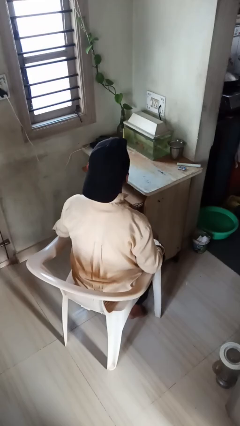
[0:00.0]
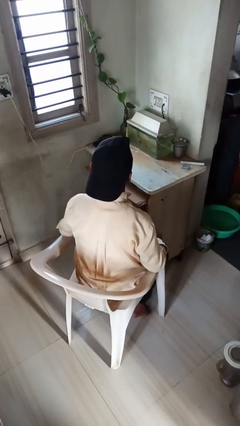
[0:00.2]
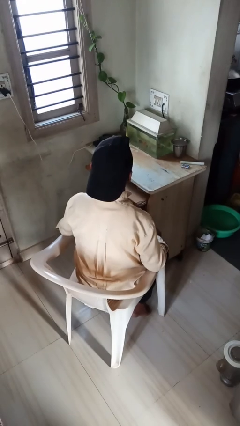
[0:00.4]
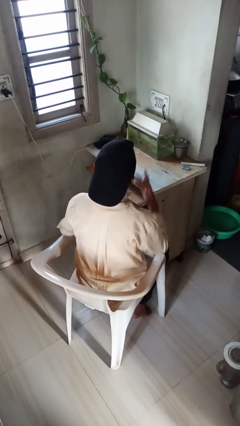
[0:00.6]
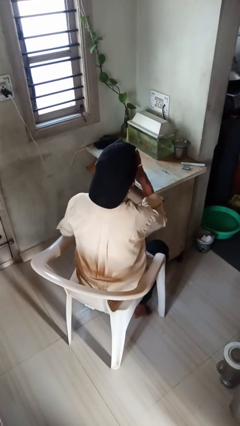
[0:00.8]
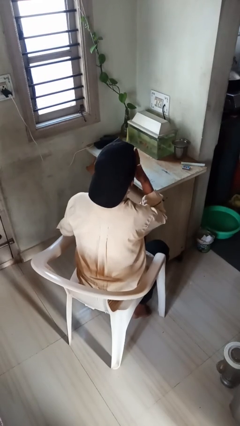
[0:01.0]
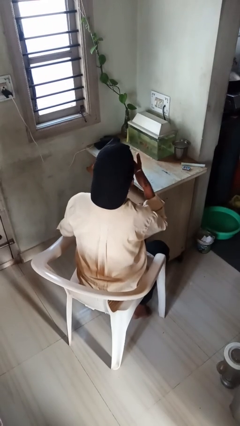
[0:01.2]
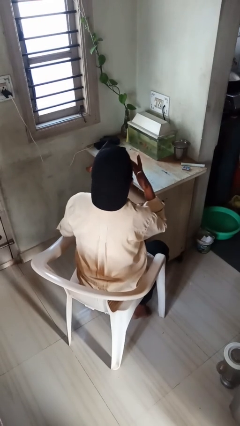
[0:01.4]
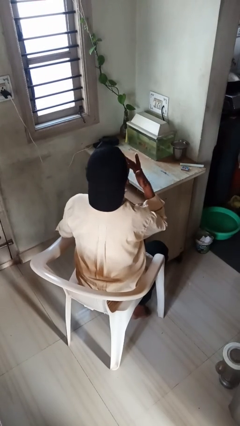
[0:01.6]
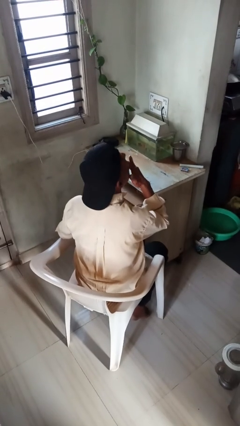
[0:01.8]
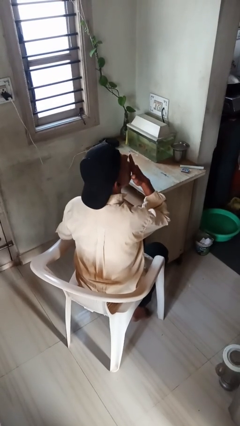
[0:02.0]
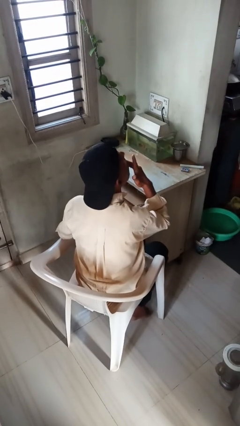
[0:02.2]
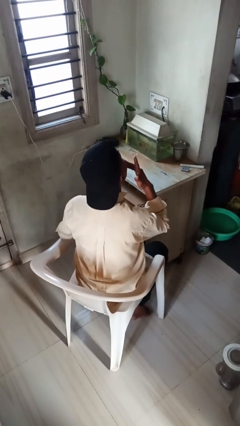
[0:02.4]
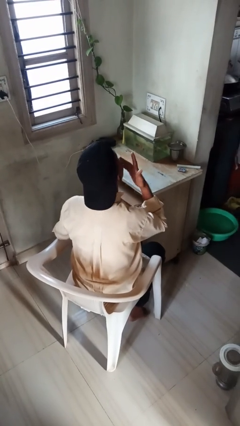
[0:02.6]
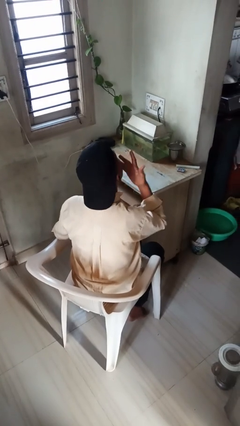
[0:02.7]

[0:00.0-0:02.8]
person licks fingers

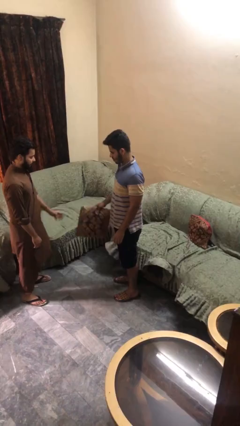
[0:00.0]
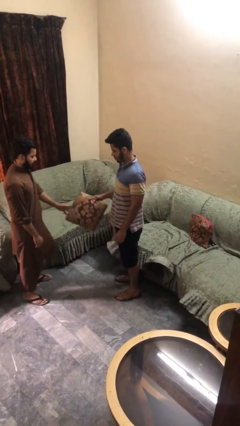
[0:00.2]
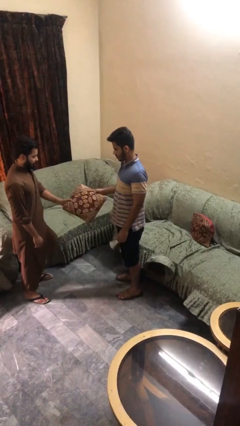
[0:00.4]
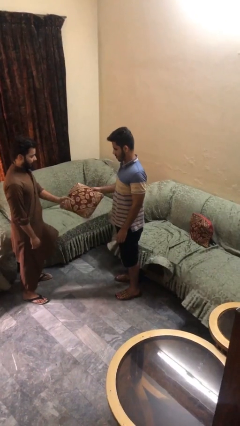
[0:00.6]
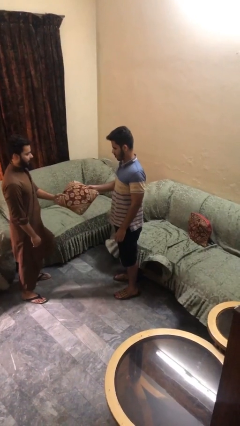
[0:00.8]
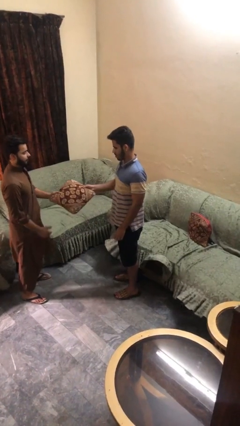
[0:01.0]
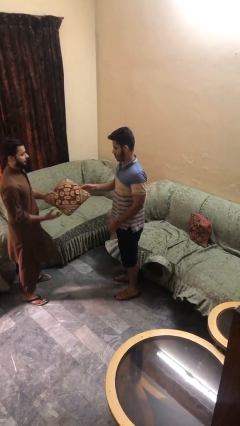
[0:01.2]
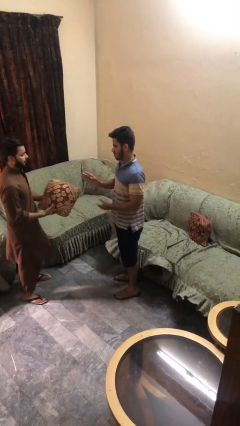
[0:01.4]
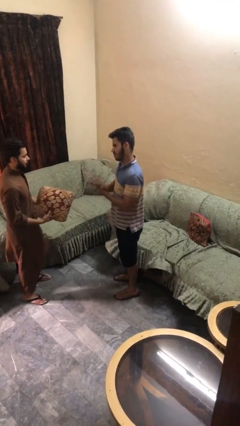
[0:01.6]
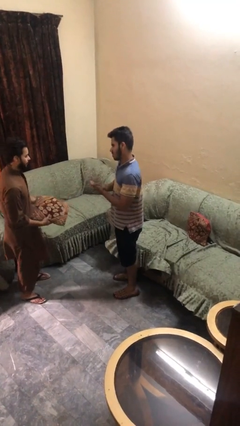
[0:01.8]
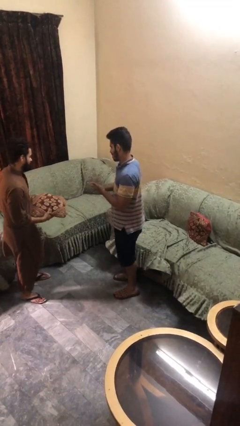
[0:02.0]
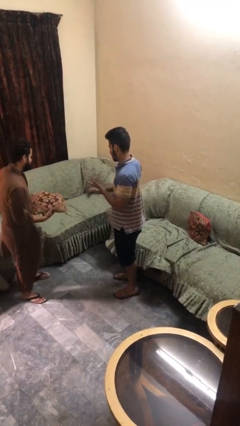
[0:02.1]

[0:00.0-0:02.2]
person transfers object to person

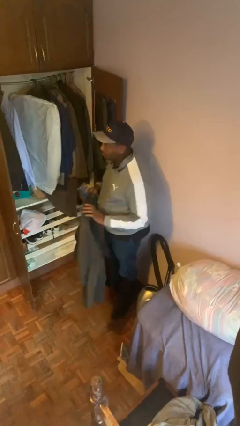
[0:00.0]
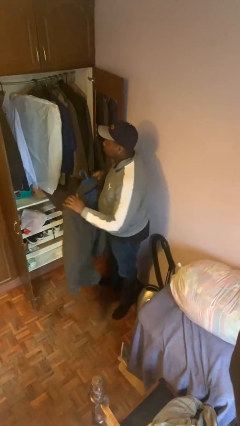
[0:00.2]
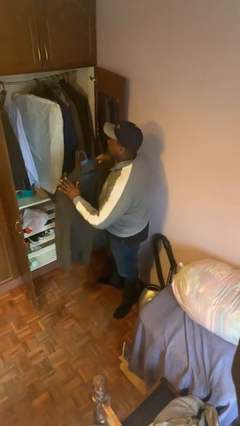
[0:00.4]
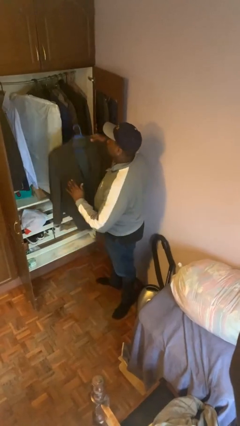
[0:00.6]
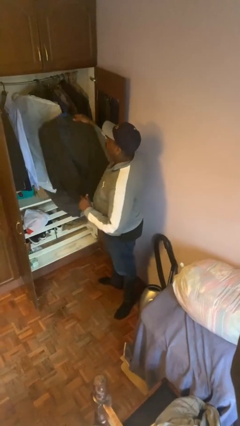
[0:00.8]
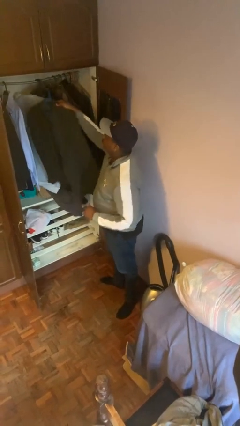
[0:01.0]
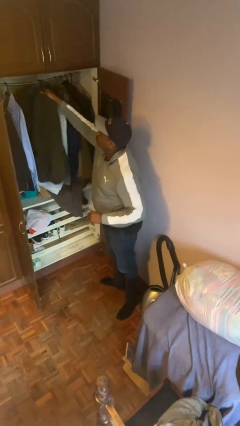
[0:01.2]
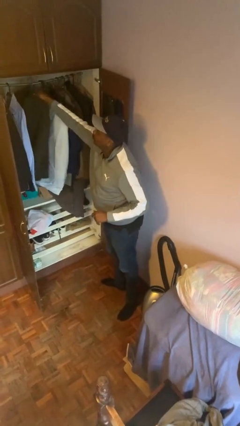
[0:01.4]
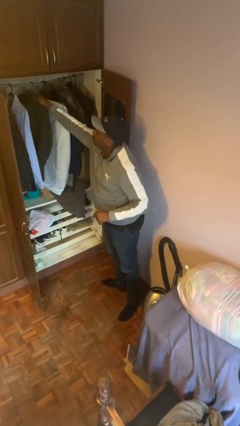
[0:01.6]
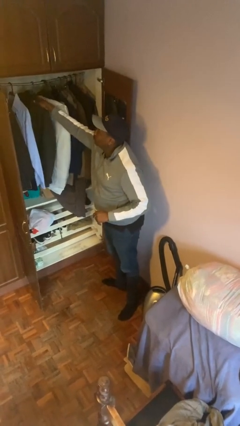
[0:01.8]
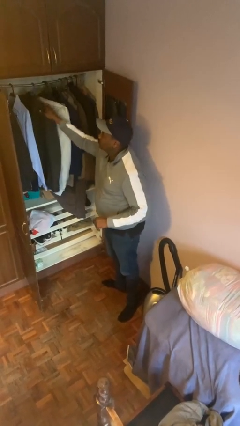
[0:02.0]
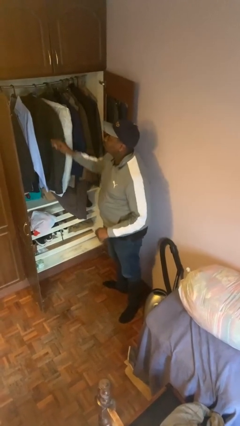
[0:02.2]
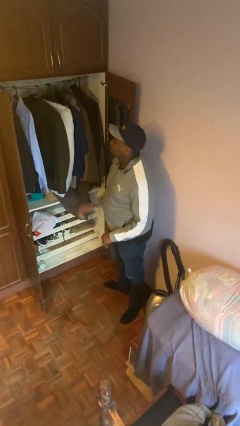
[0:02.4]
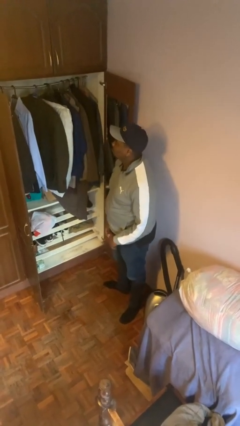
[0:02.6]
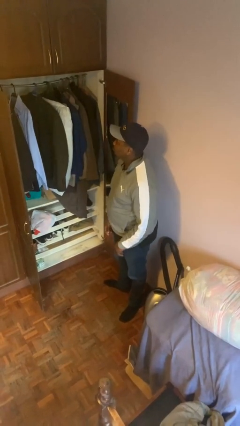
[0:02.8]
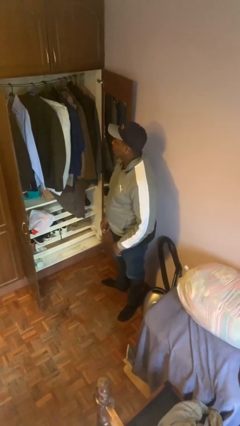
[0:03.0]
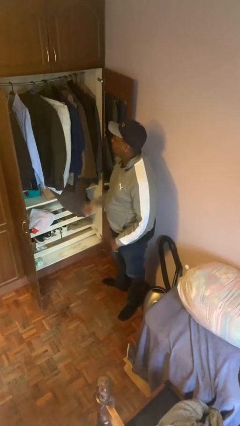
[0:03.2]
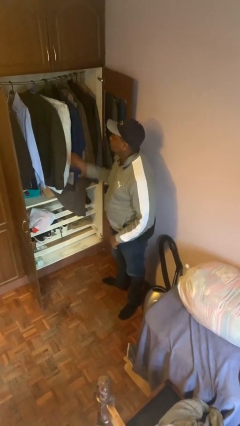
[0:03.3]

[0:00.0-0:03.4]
person puts clothes into closet

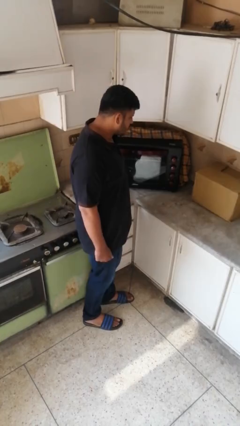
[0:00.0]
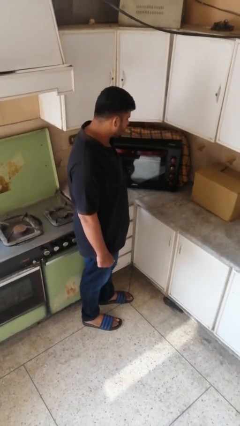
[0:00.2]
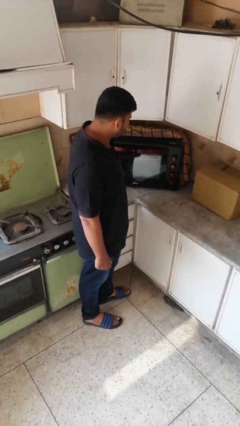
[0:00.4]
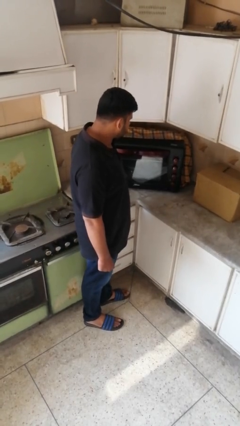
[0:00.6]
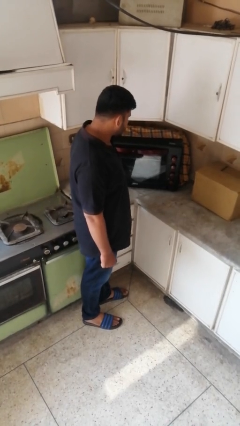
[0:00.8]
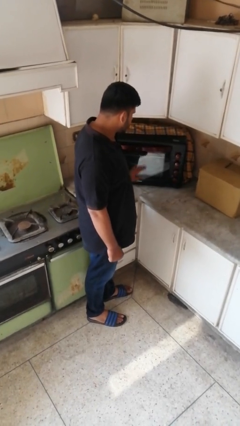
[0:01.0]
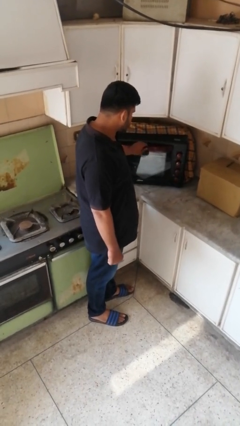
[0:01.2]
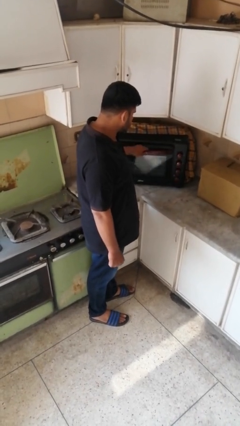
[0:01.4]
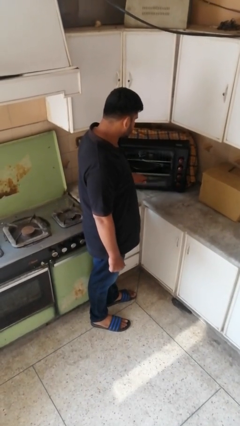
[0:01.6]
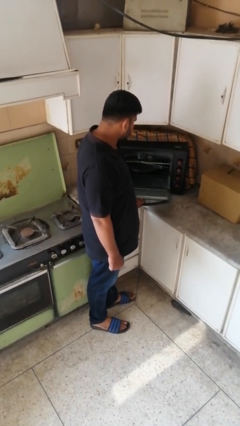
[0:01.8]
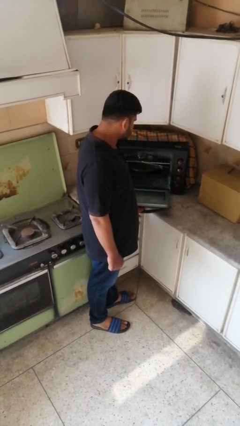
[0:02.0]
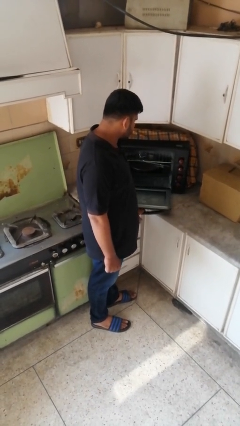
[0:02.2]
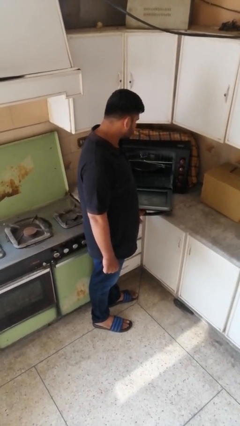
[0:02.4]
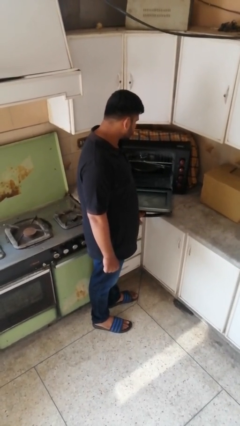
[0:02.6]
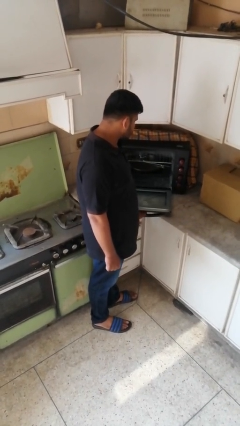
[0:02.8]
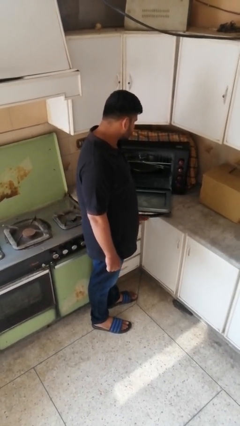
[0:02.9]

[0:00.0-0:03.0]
person opens oven door

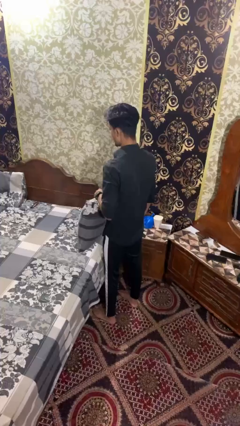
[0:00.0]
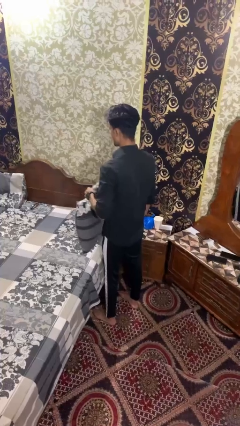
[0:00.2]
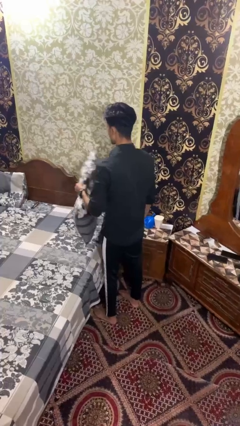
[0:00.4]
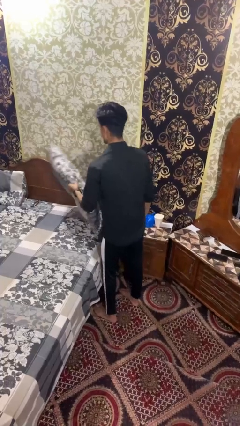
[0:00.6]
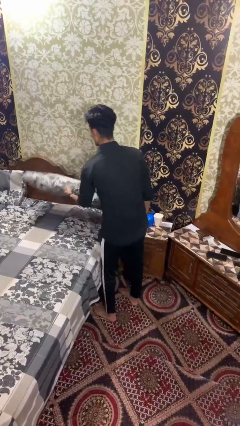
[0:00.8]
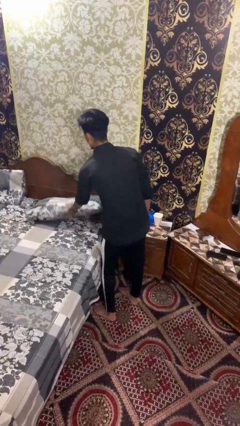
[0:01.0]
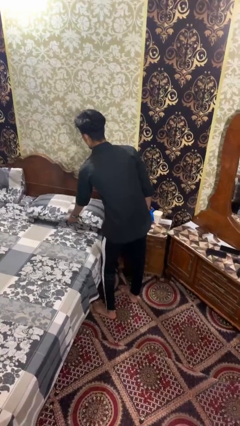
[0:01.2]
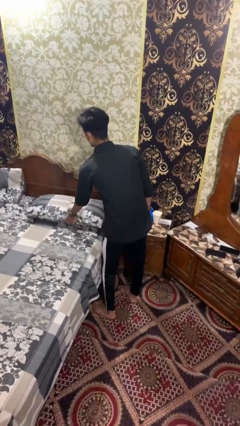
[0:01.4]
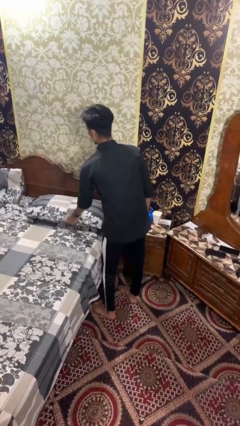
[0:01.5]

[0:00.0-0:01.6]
person puts down object on bed

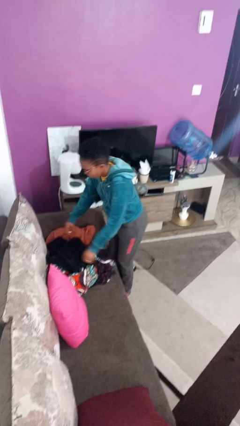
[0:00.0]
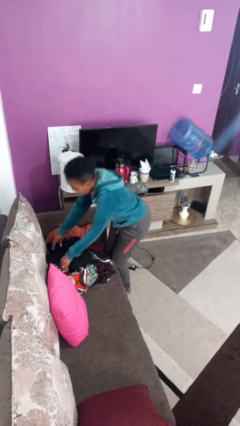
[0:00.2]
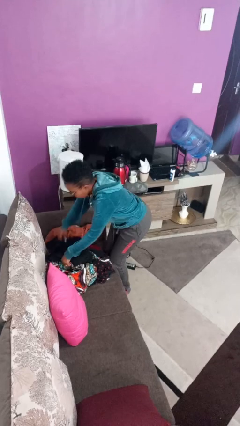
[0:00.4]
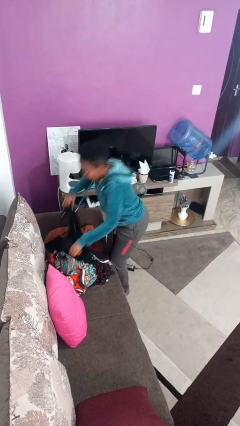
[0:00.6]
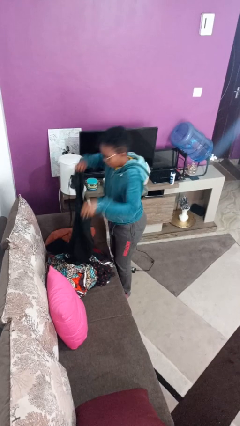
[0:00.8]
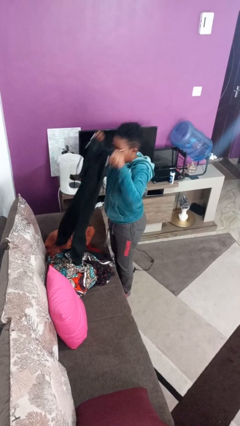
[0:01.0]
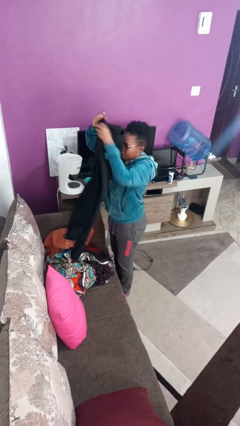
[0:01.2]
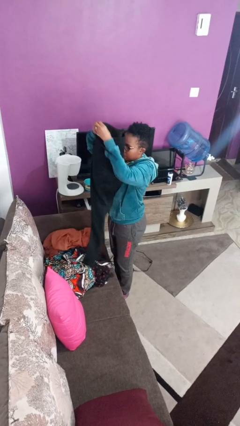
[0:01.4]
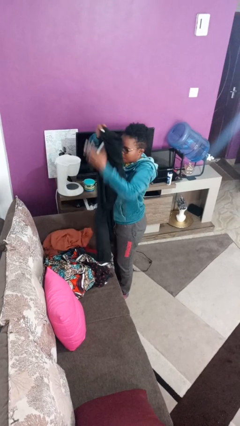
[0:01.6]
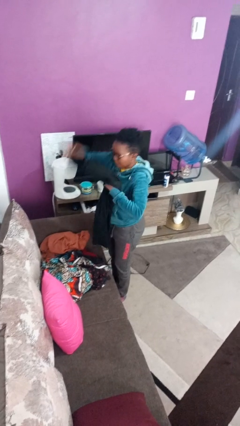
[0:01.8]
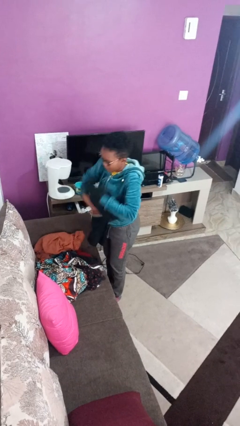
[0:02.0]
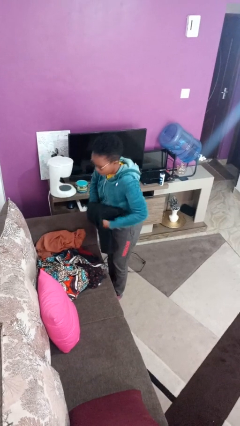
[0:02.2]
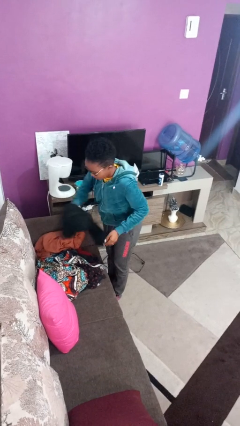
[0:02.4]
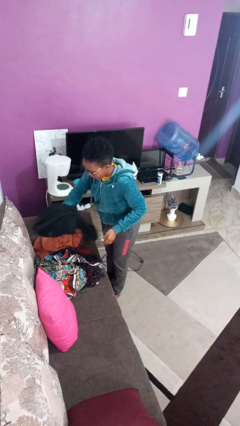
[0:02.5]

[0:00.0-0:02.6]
person folds pants

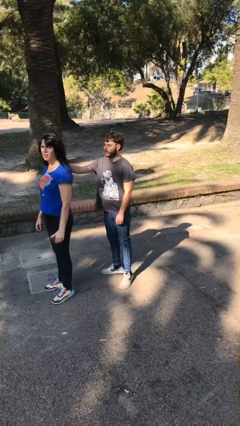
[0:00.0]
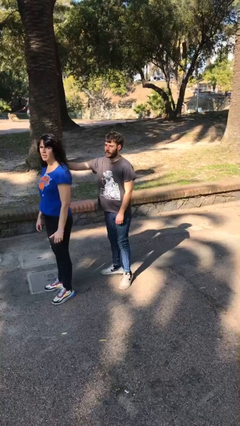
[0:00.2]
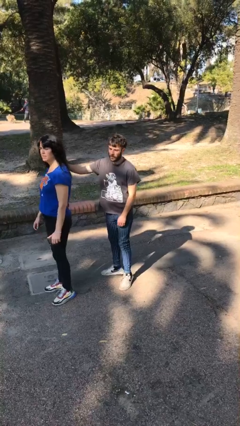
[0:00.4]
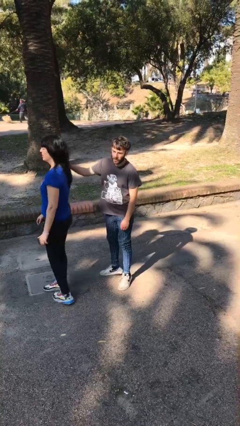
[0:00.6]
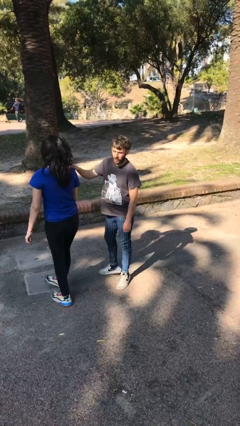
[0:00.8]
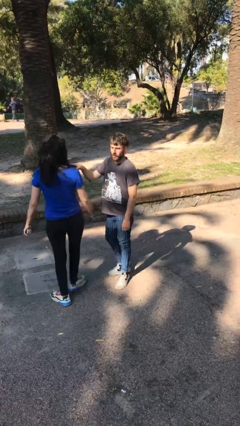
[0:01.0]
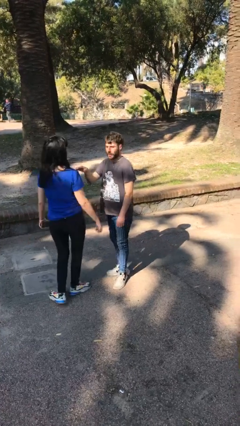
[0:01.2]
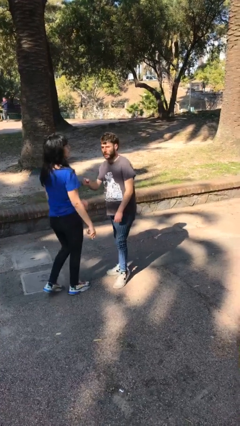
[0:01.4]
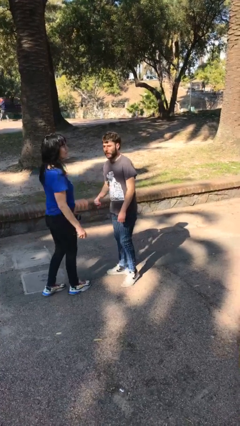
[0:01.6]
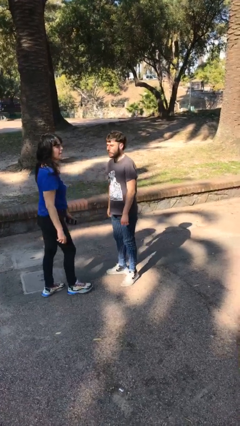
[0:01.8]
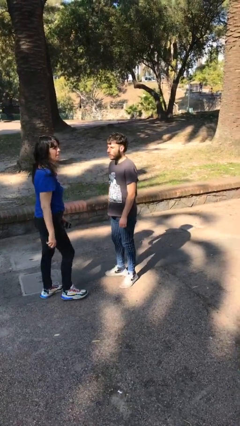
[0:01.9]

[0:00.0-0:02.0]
person spins person around
